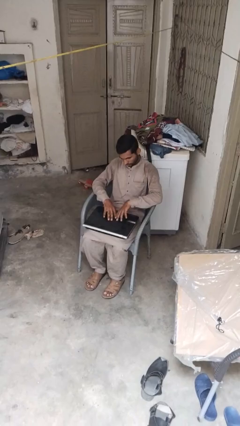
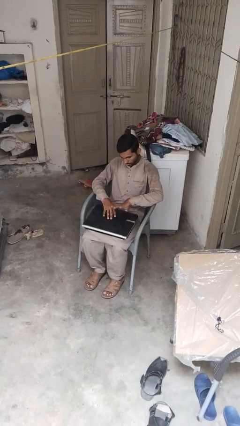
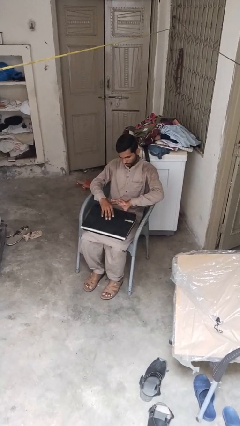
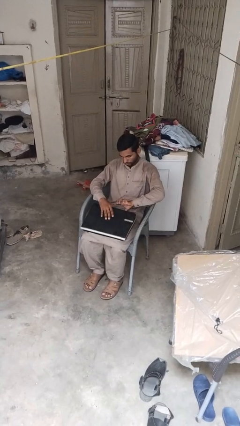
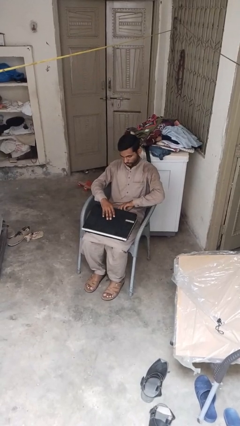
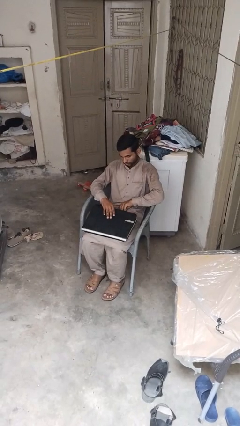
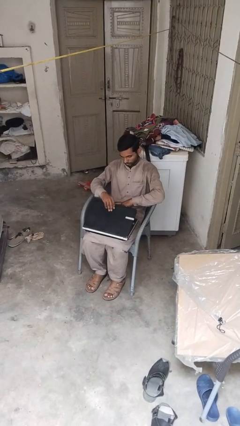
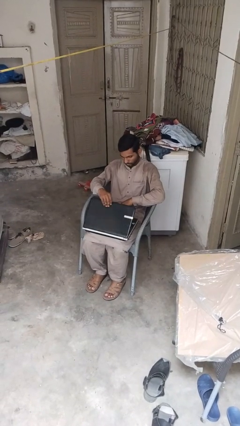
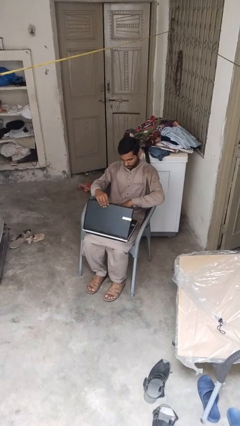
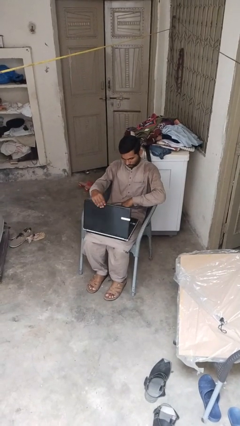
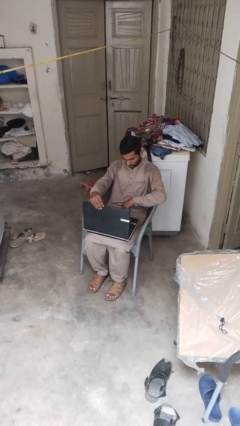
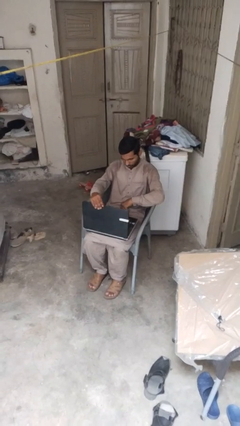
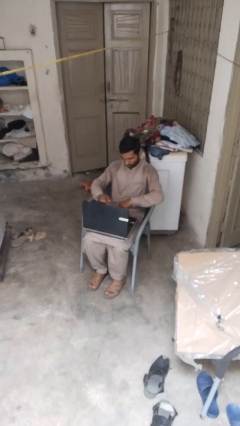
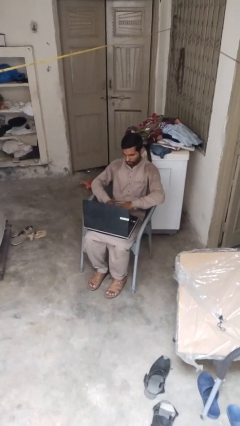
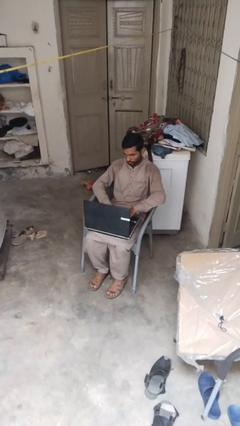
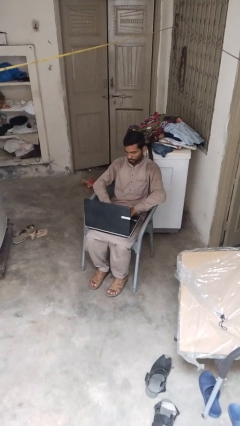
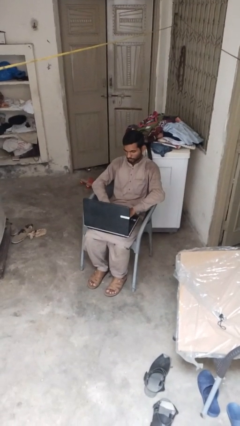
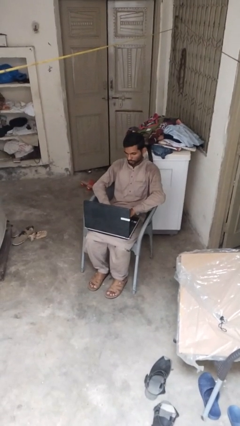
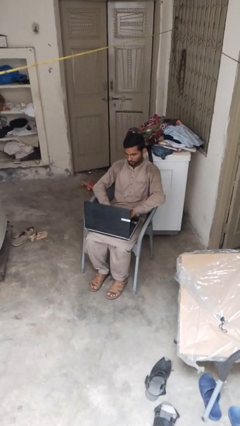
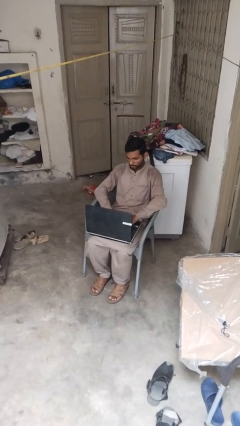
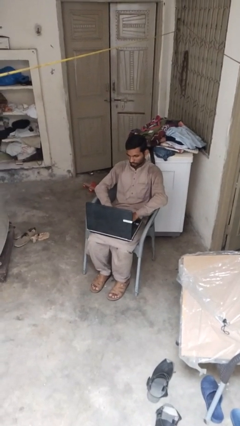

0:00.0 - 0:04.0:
person opens laptop

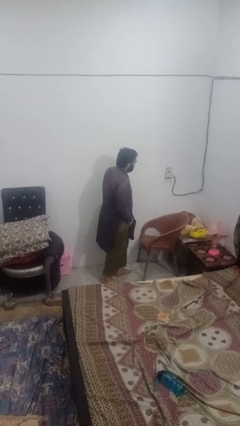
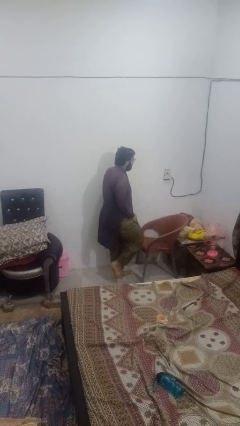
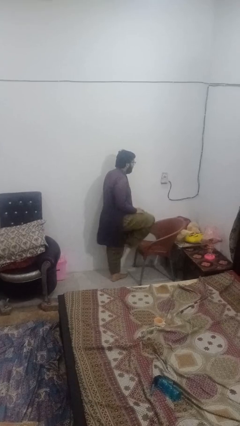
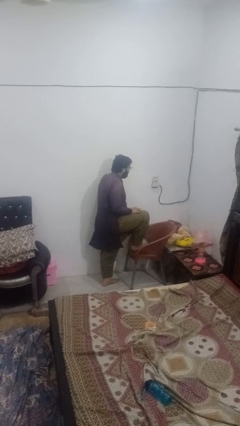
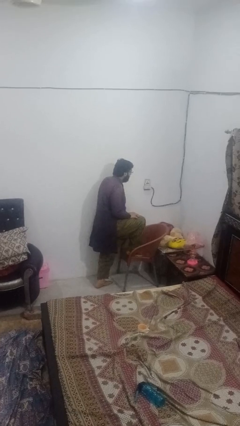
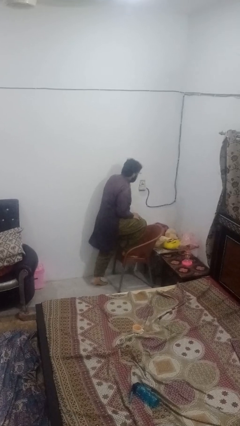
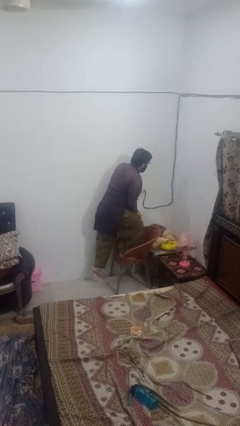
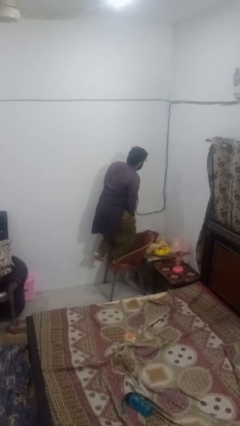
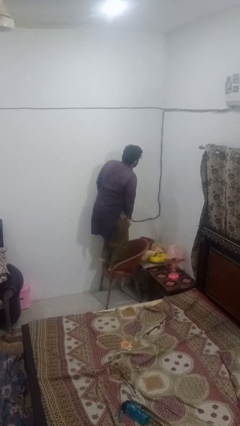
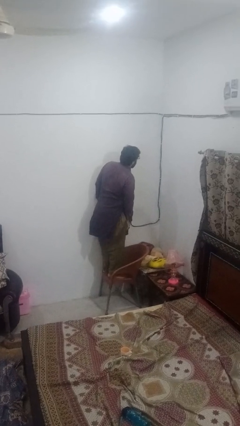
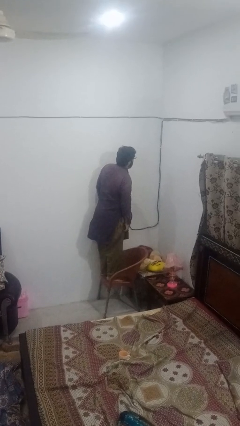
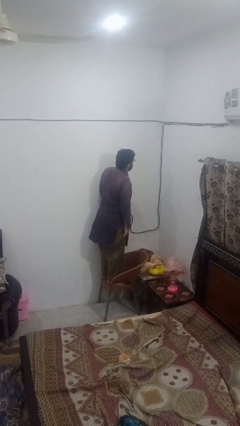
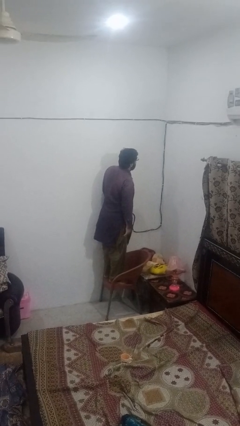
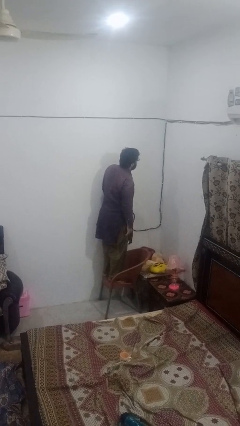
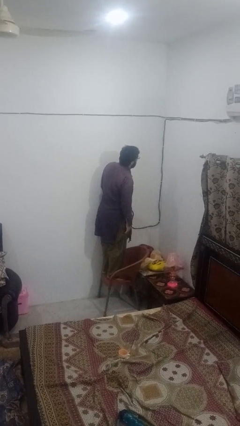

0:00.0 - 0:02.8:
person climbs on chair

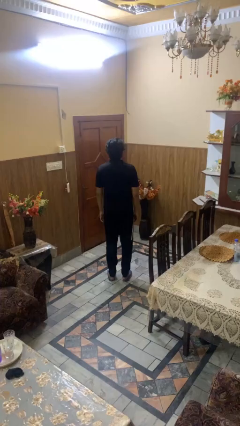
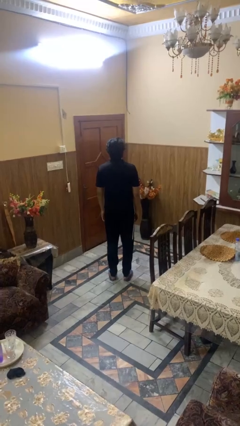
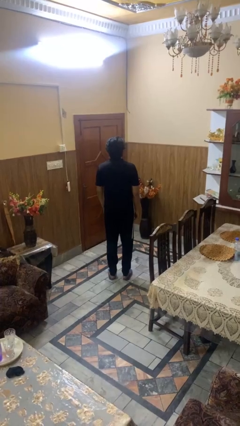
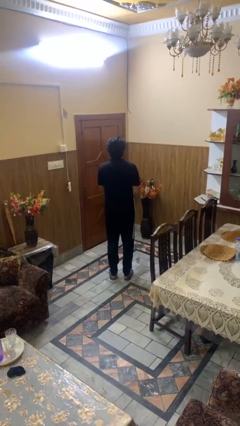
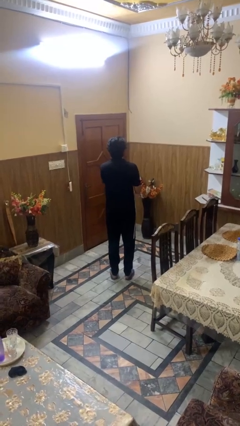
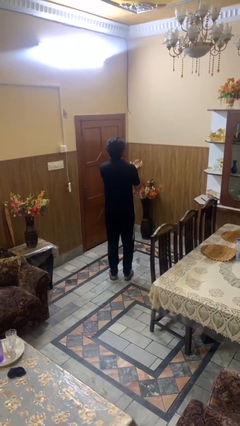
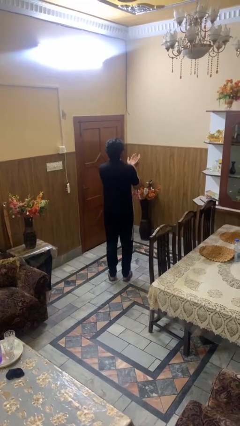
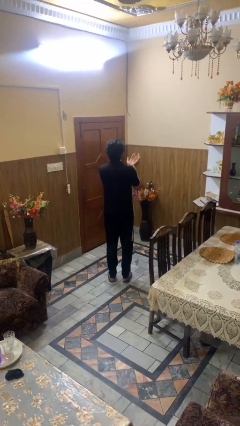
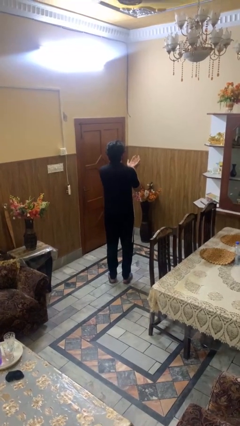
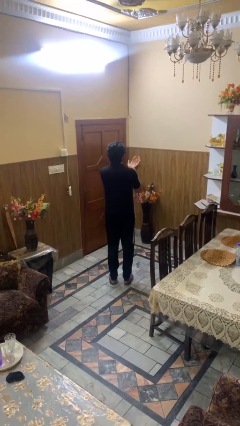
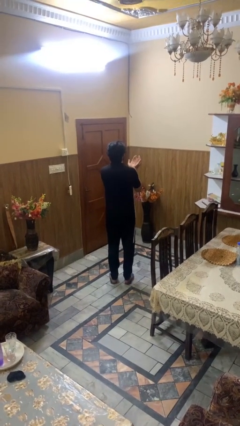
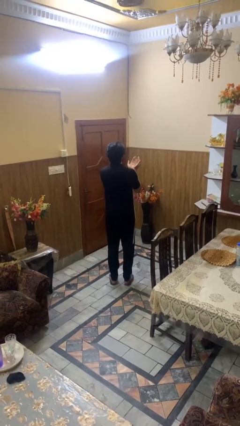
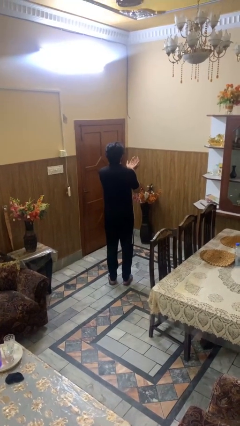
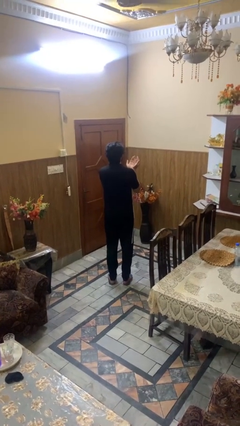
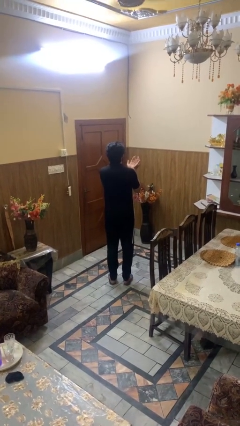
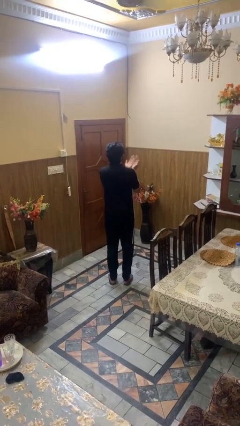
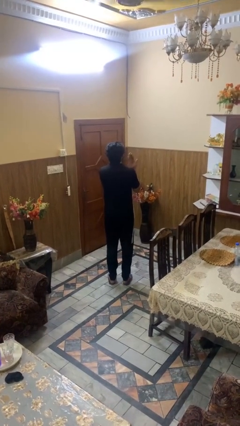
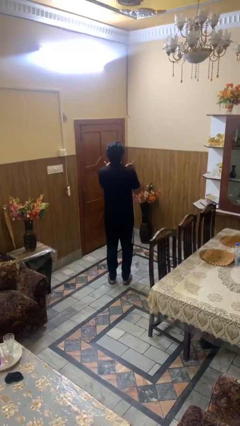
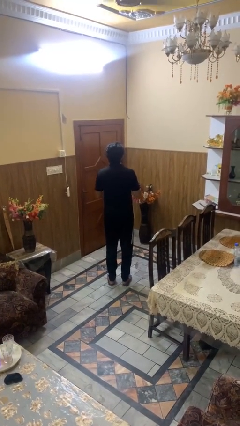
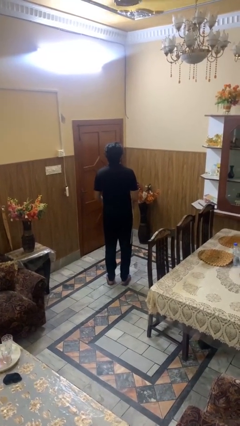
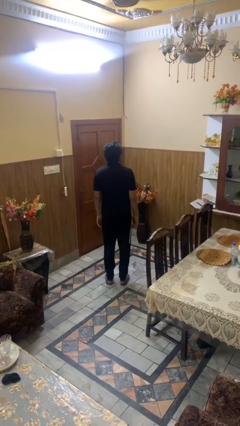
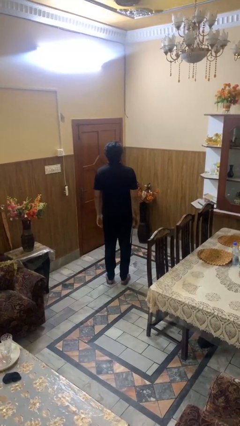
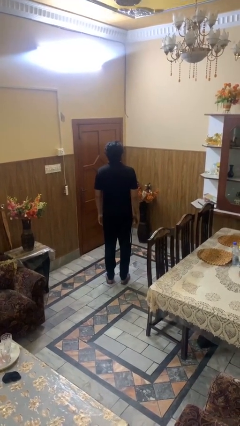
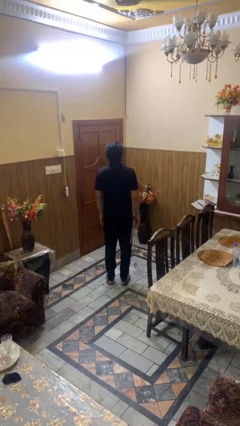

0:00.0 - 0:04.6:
person prays

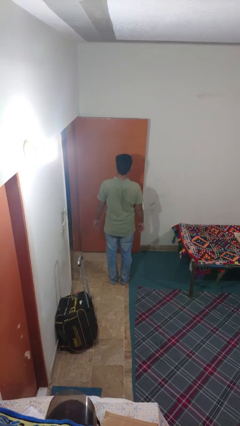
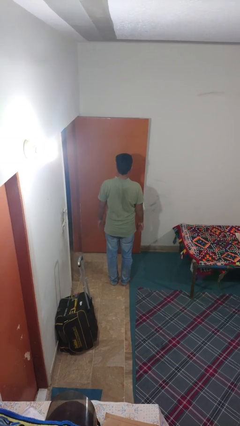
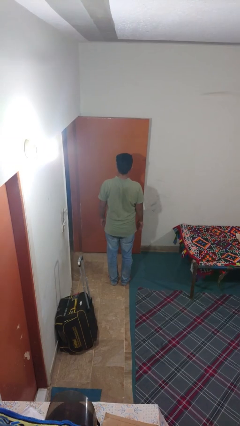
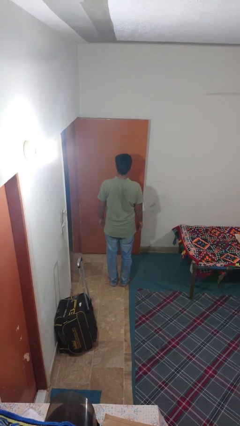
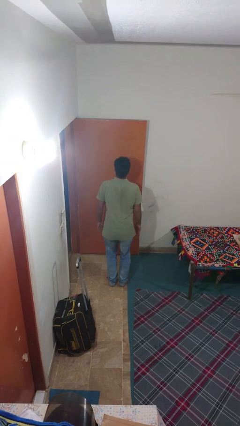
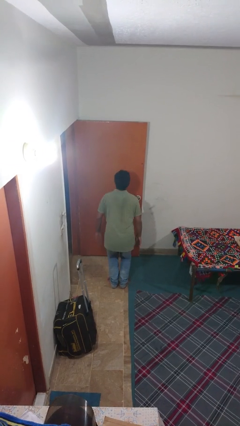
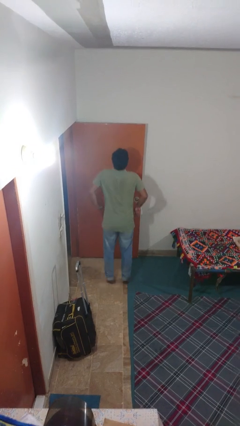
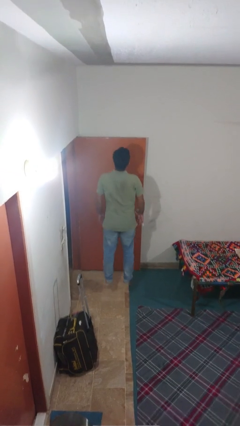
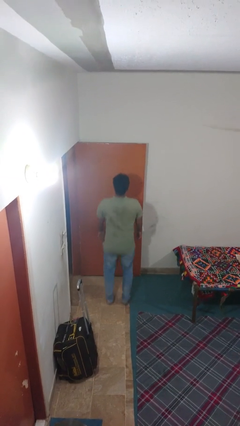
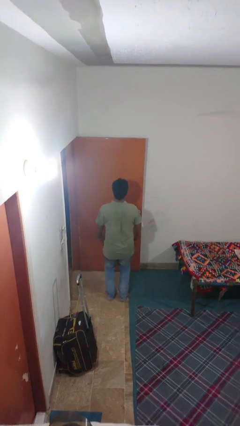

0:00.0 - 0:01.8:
person jumps

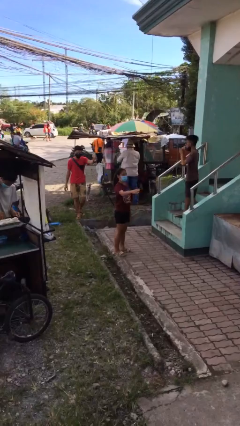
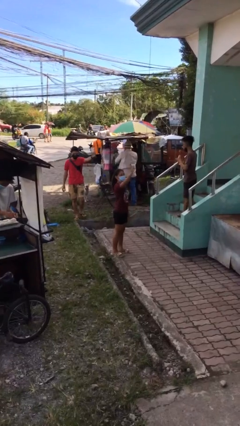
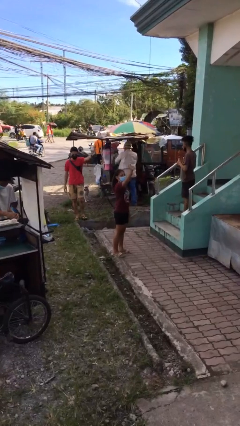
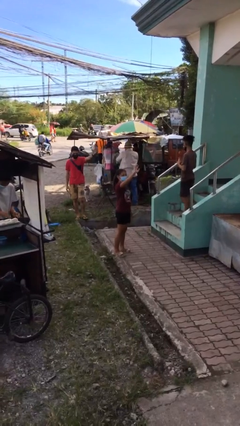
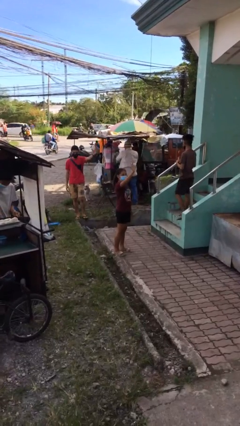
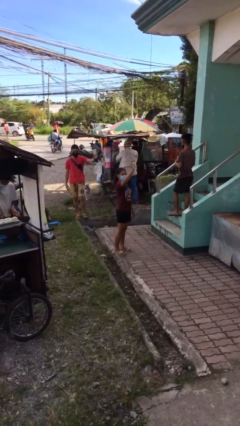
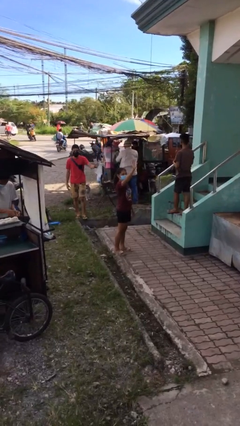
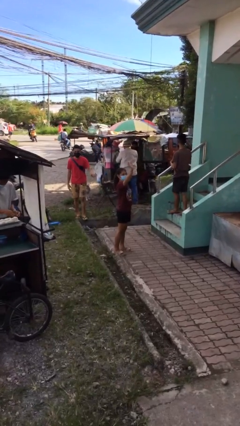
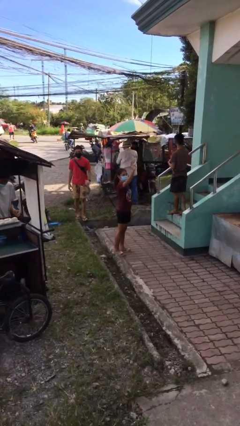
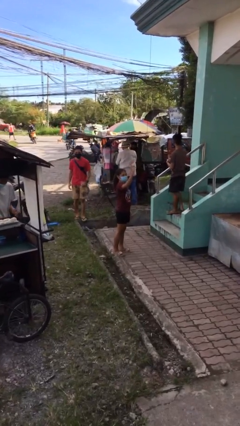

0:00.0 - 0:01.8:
person waves at person

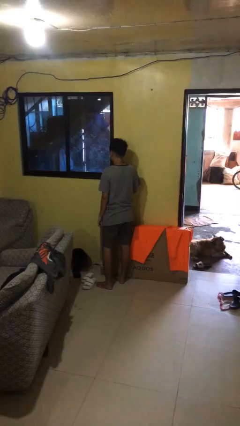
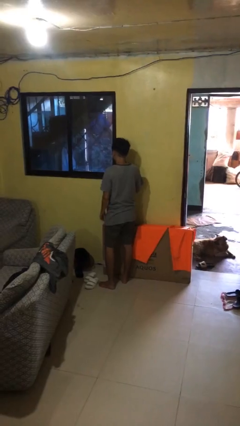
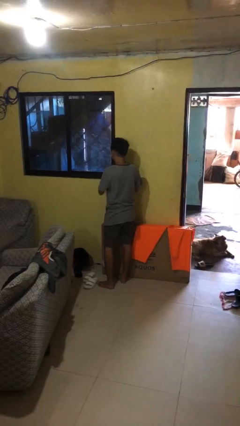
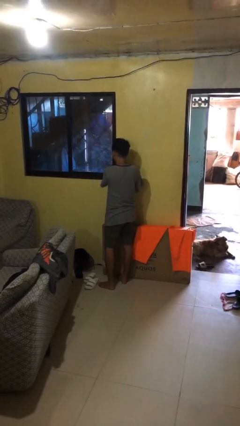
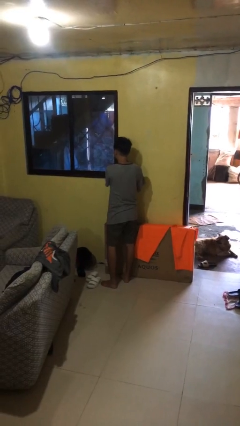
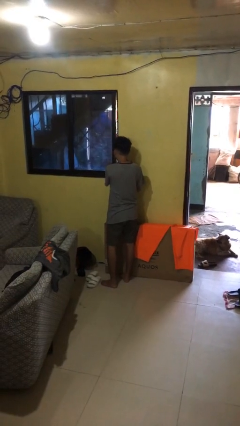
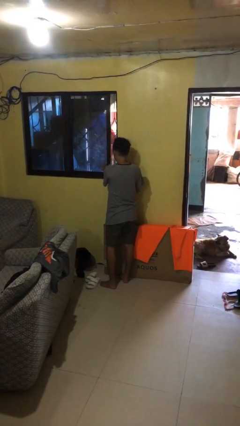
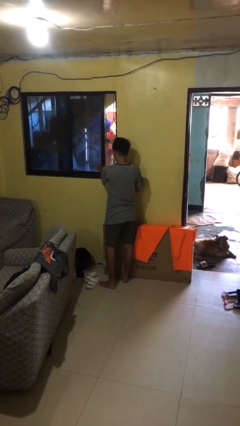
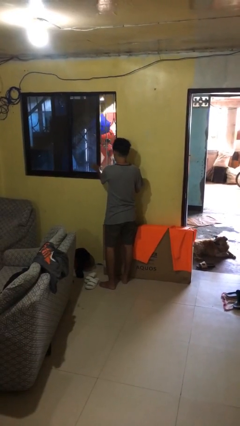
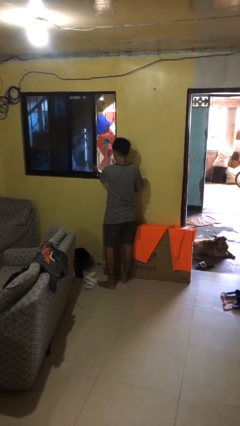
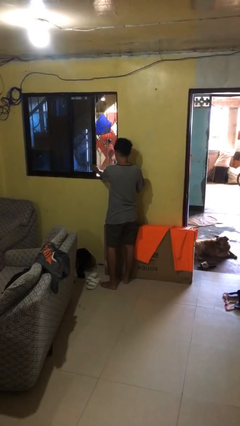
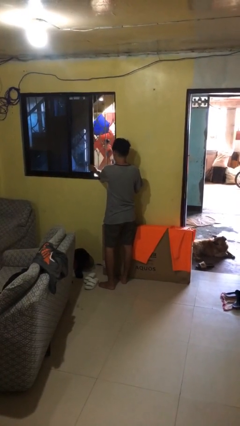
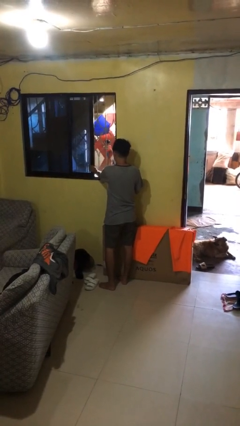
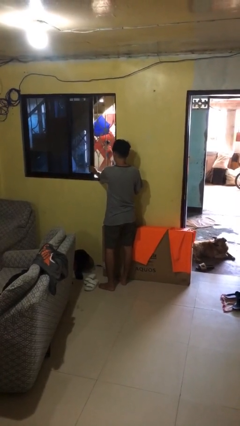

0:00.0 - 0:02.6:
person opens home window
